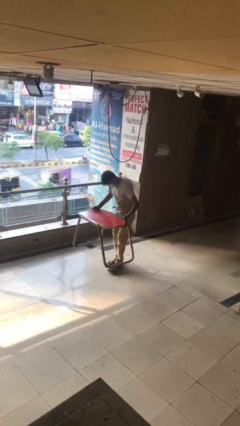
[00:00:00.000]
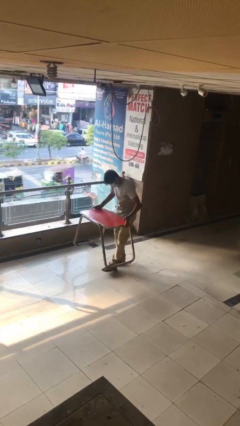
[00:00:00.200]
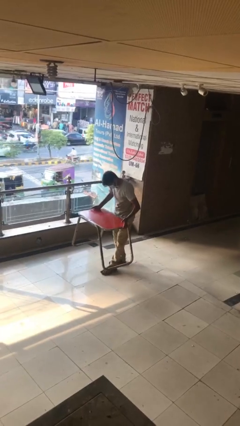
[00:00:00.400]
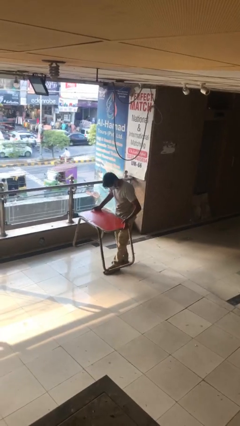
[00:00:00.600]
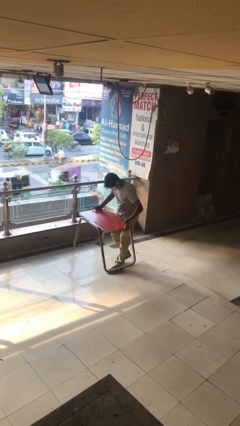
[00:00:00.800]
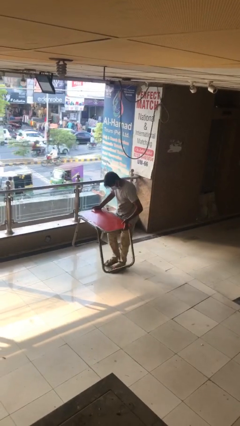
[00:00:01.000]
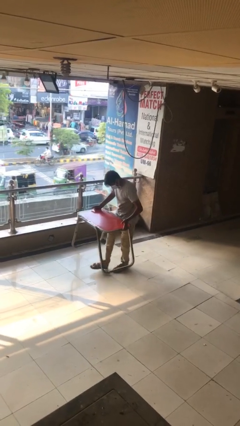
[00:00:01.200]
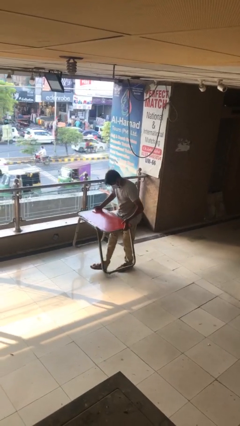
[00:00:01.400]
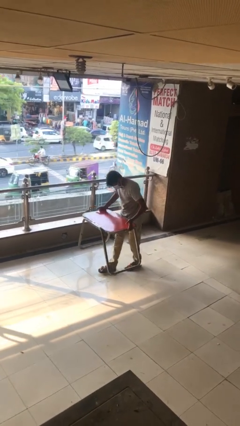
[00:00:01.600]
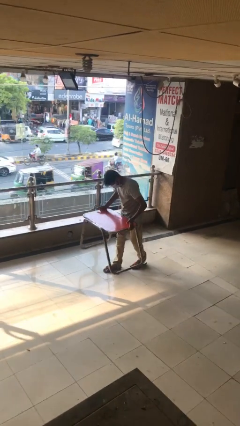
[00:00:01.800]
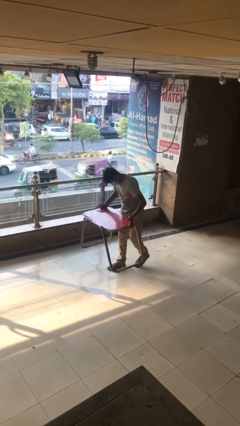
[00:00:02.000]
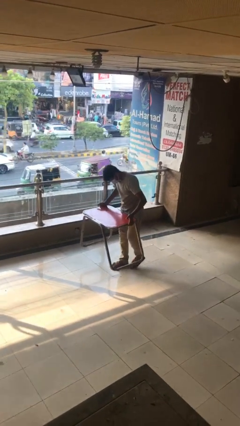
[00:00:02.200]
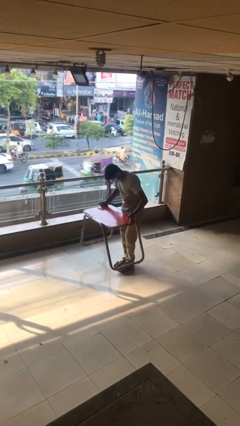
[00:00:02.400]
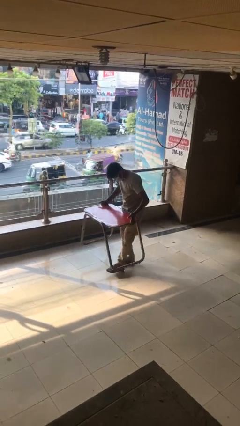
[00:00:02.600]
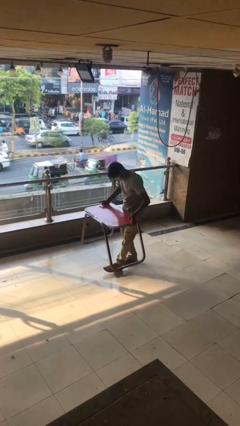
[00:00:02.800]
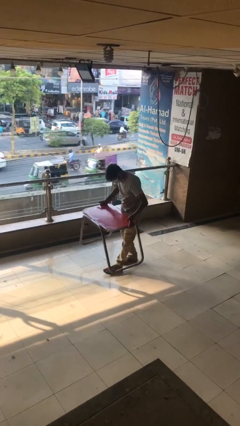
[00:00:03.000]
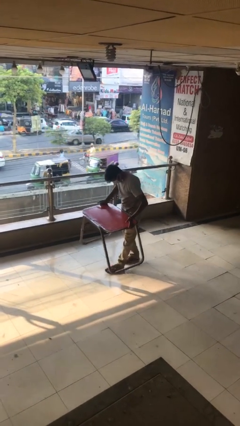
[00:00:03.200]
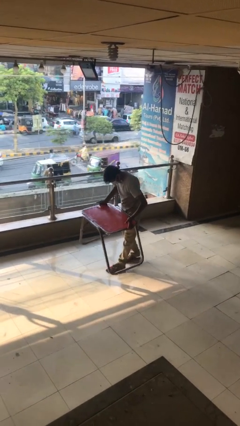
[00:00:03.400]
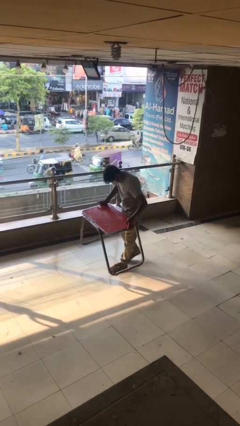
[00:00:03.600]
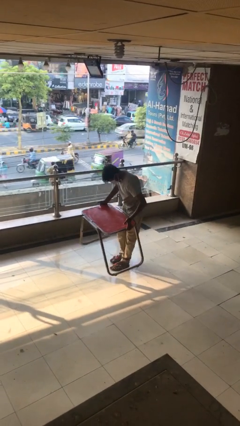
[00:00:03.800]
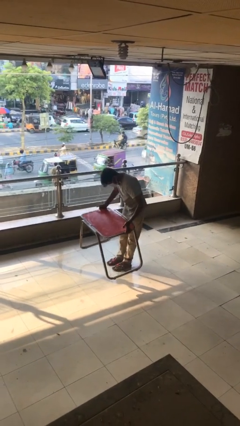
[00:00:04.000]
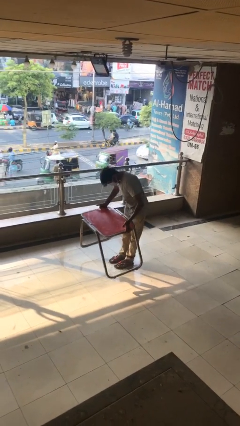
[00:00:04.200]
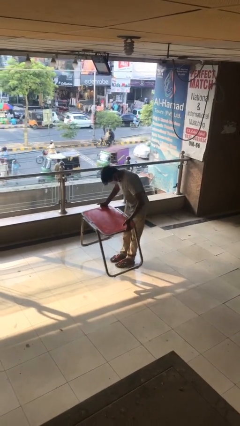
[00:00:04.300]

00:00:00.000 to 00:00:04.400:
person carries heavy object

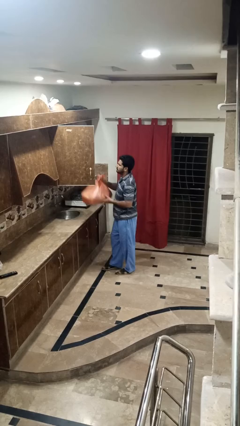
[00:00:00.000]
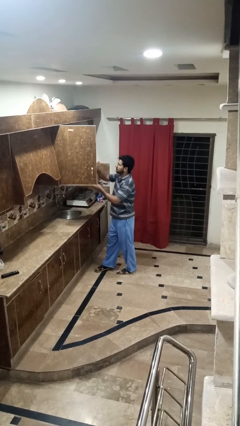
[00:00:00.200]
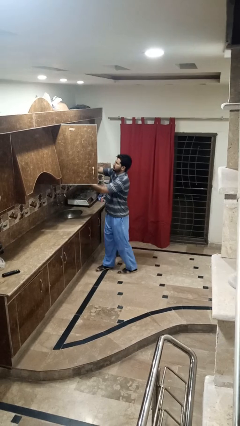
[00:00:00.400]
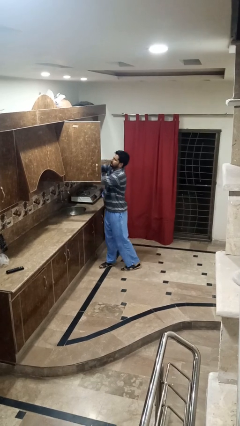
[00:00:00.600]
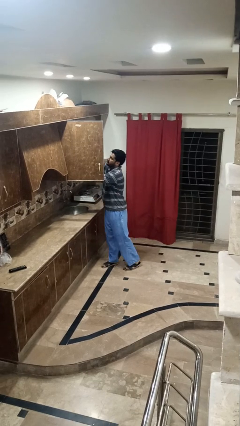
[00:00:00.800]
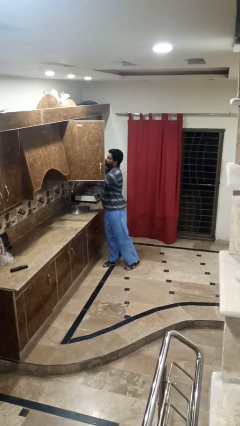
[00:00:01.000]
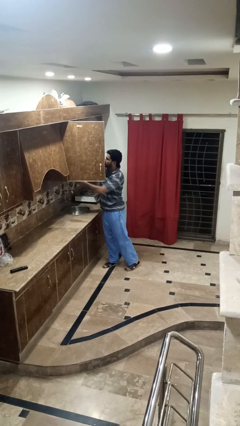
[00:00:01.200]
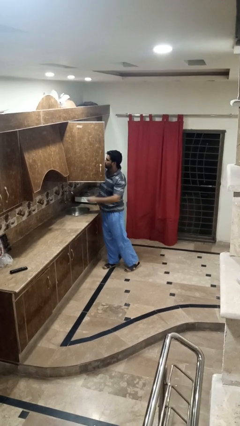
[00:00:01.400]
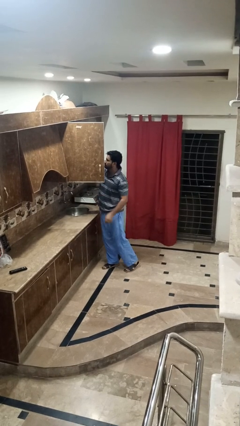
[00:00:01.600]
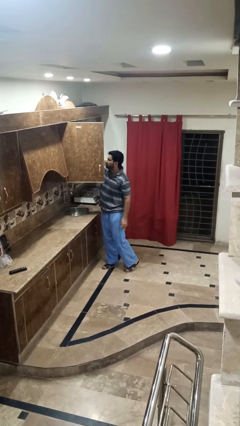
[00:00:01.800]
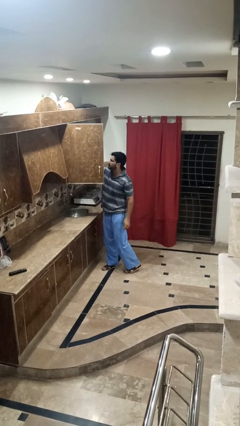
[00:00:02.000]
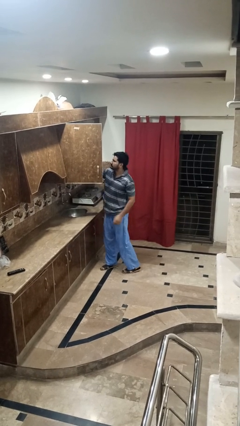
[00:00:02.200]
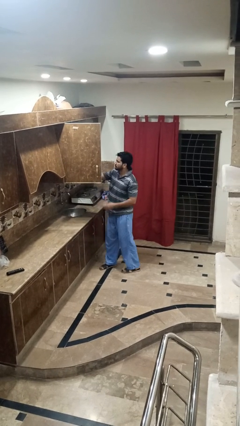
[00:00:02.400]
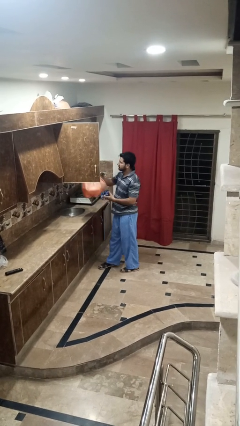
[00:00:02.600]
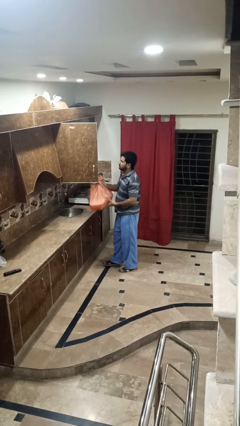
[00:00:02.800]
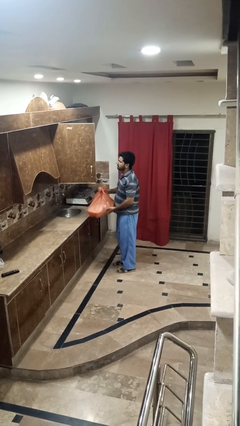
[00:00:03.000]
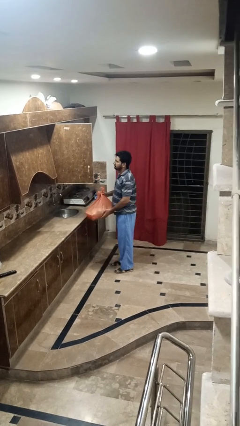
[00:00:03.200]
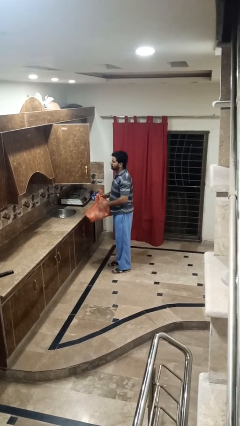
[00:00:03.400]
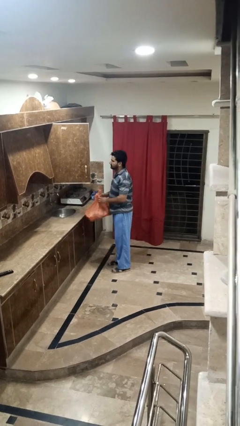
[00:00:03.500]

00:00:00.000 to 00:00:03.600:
person loads groceries into cabinet

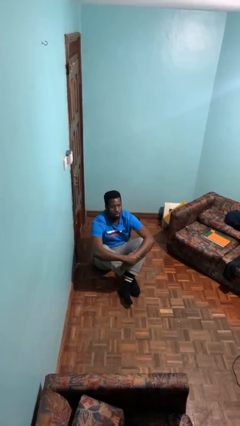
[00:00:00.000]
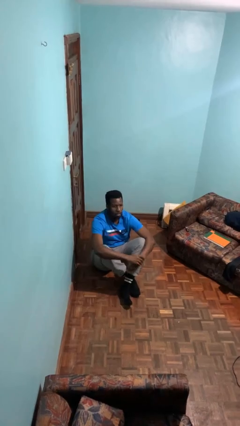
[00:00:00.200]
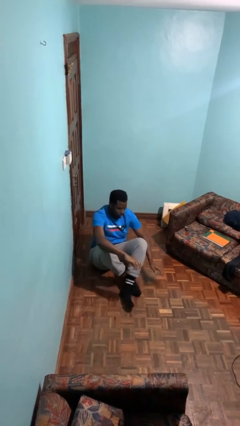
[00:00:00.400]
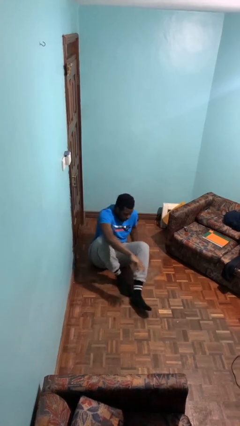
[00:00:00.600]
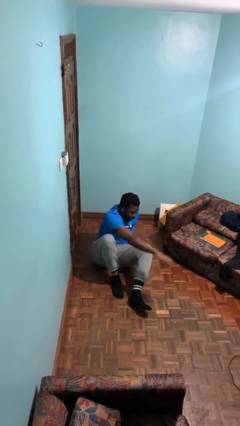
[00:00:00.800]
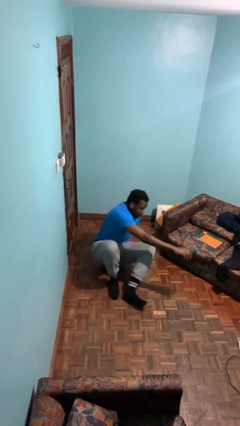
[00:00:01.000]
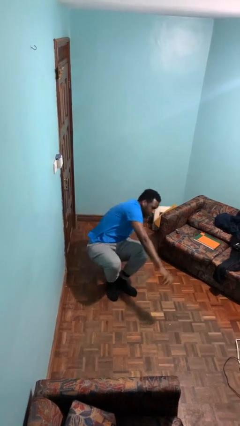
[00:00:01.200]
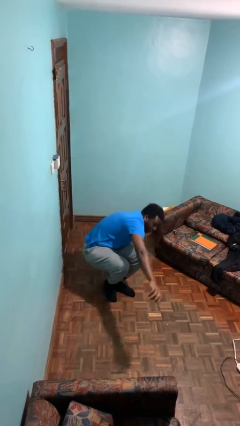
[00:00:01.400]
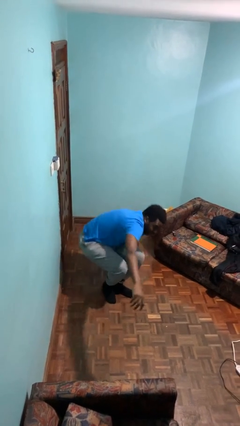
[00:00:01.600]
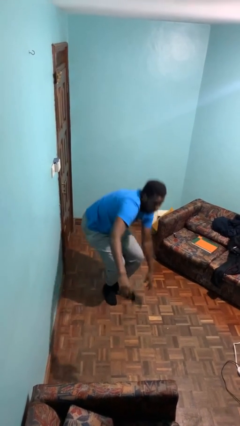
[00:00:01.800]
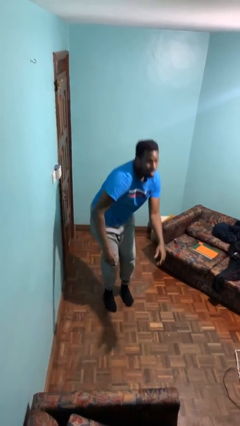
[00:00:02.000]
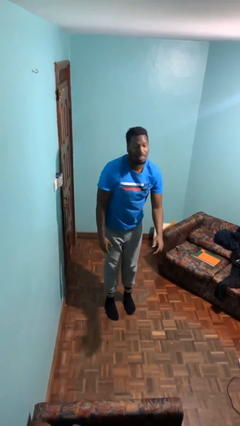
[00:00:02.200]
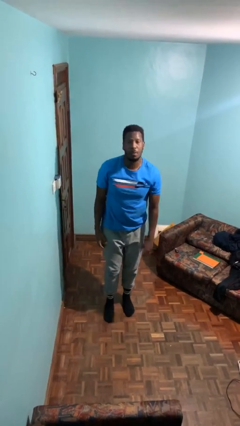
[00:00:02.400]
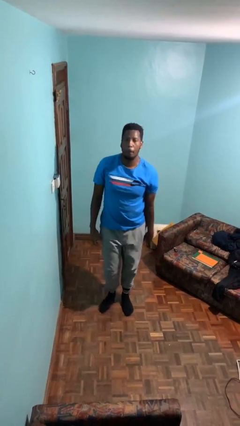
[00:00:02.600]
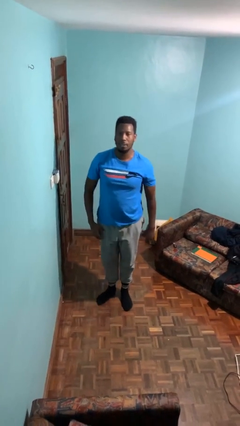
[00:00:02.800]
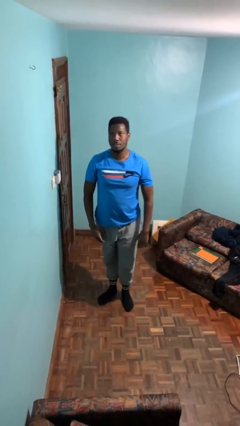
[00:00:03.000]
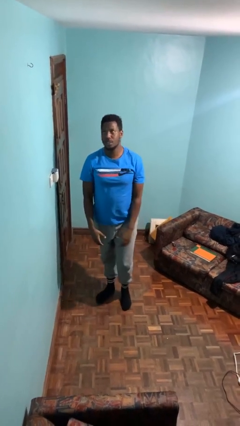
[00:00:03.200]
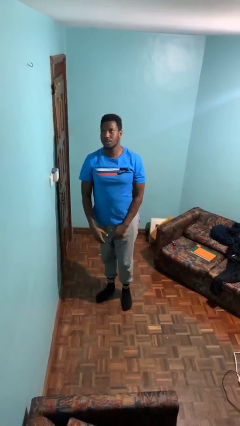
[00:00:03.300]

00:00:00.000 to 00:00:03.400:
person stands up from floor

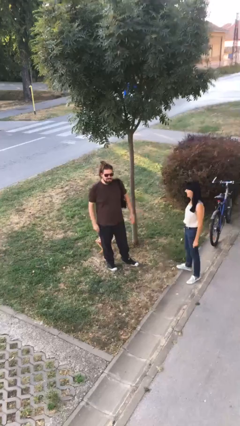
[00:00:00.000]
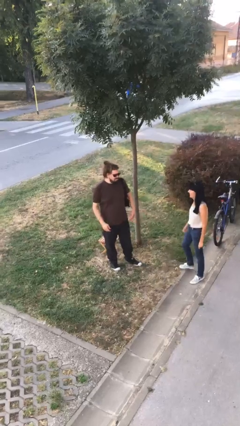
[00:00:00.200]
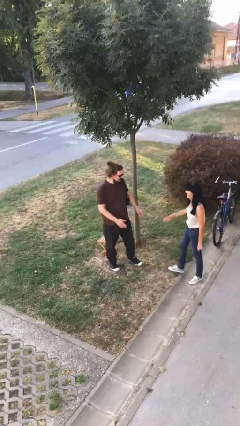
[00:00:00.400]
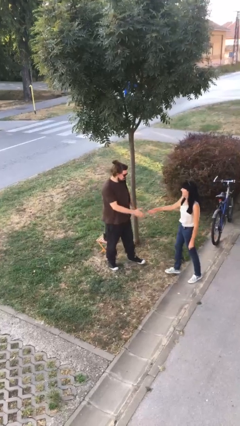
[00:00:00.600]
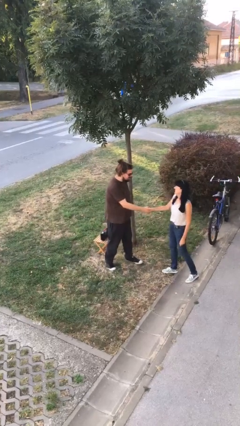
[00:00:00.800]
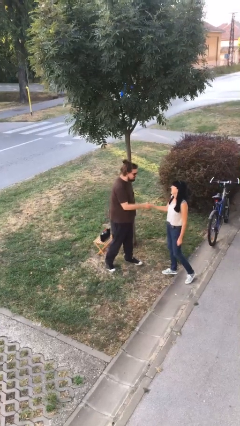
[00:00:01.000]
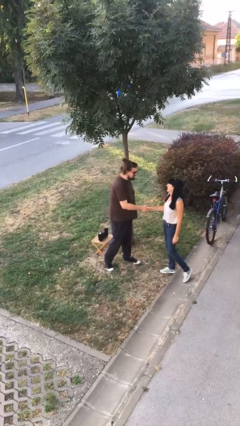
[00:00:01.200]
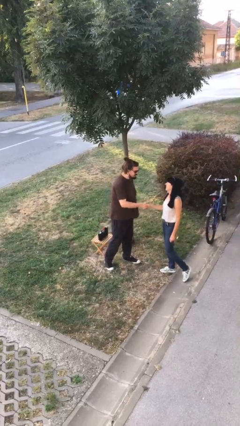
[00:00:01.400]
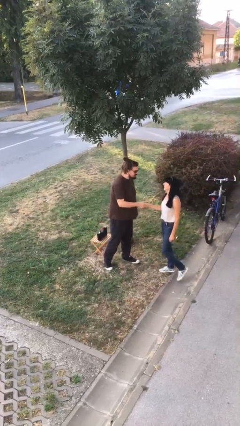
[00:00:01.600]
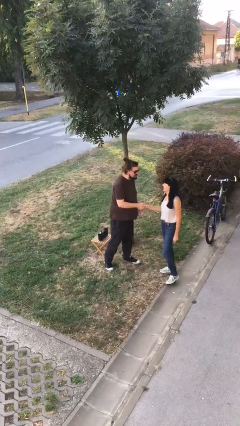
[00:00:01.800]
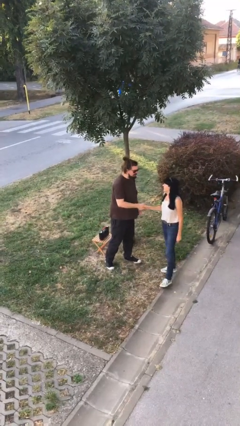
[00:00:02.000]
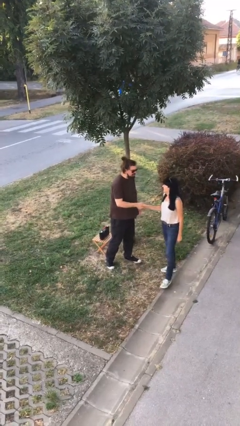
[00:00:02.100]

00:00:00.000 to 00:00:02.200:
person shakes hand

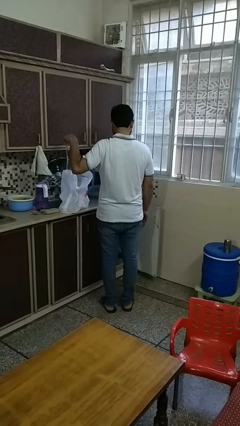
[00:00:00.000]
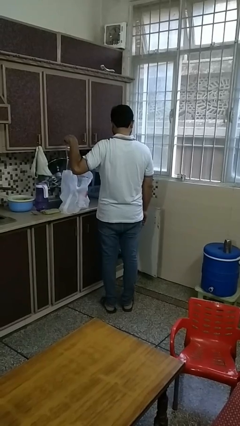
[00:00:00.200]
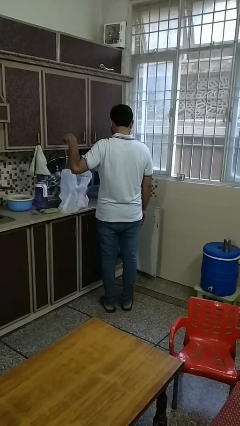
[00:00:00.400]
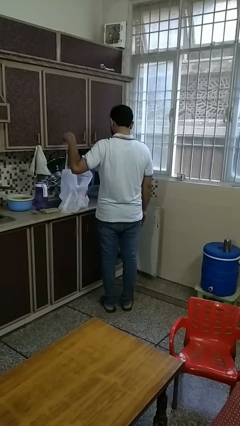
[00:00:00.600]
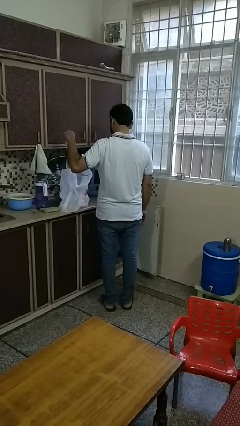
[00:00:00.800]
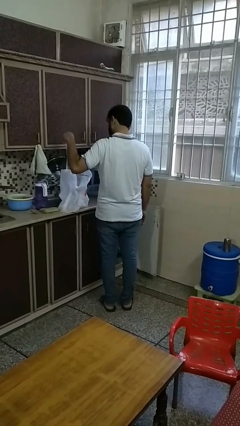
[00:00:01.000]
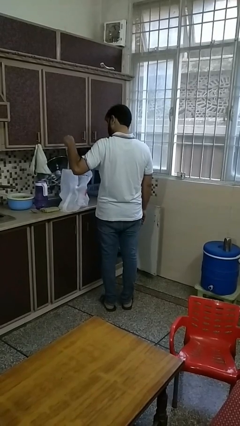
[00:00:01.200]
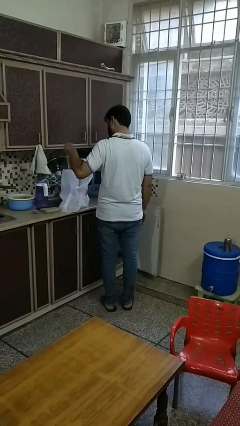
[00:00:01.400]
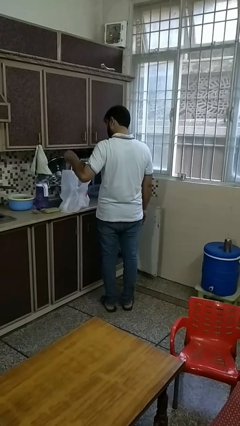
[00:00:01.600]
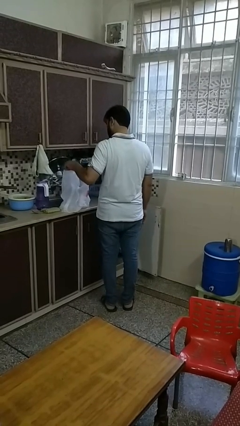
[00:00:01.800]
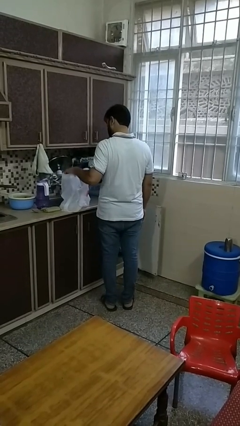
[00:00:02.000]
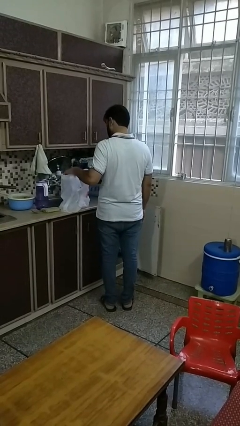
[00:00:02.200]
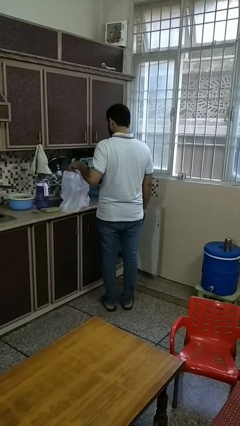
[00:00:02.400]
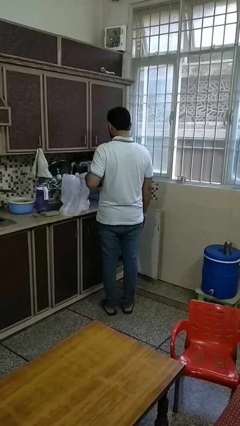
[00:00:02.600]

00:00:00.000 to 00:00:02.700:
person puts object into bag

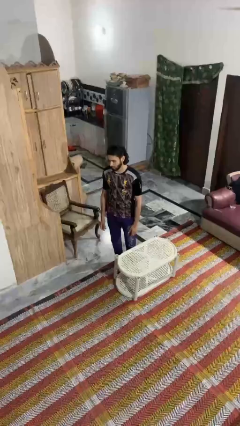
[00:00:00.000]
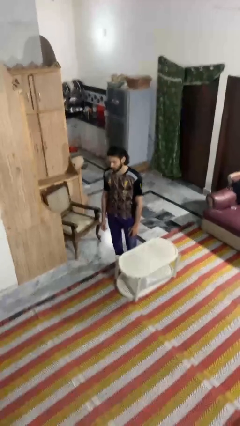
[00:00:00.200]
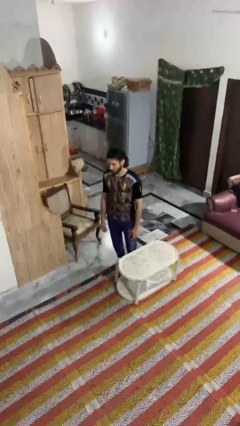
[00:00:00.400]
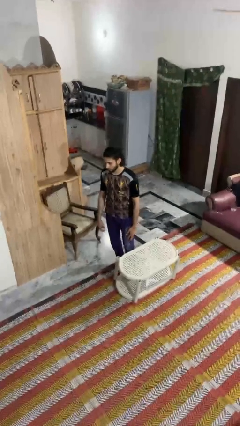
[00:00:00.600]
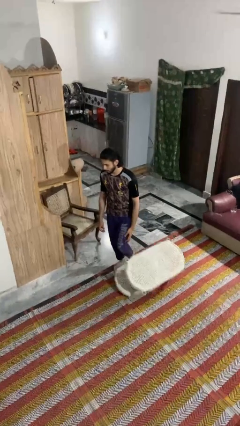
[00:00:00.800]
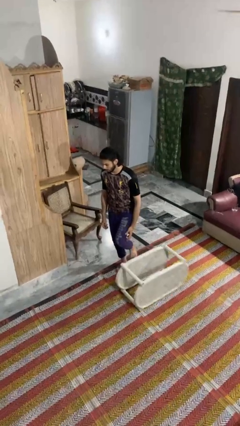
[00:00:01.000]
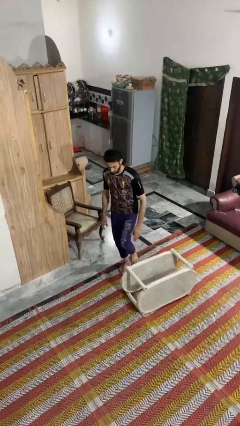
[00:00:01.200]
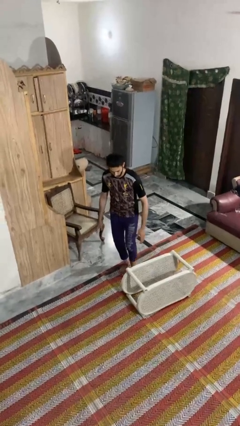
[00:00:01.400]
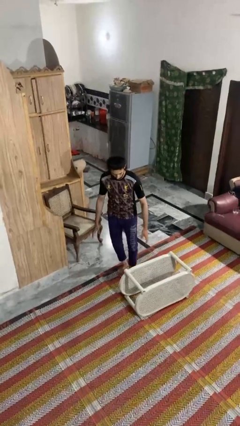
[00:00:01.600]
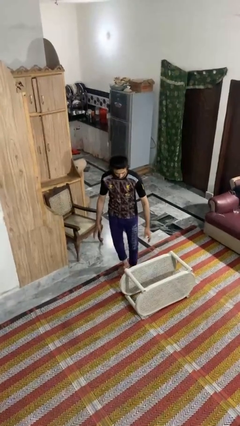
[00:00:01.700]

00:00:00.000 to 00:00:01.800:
person knocks over furniture
